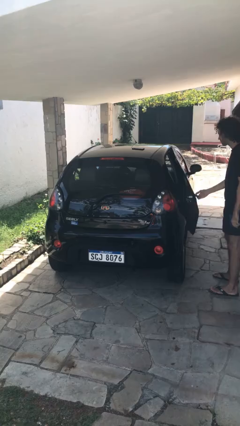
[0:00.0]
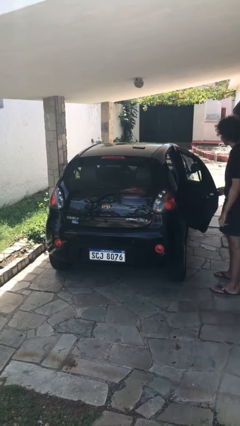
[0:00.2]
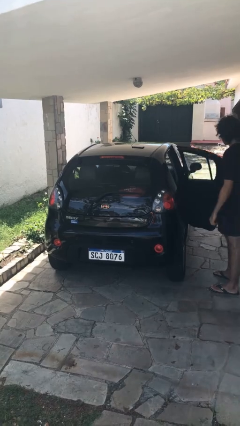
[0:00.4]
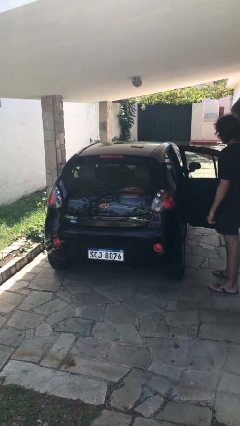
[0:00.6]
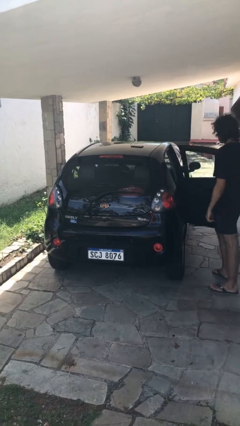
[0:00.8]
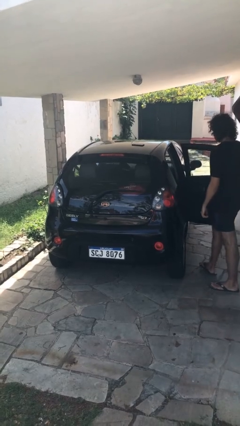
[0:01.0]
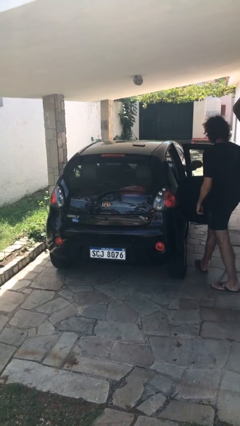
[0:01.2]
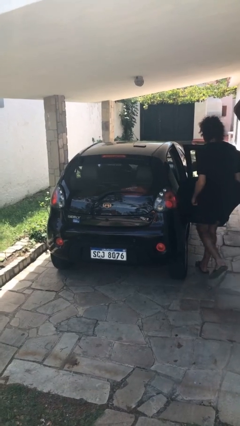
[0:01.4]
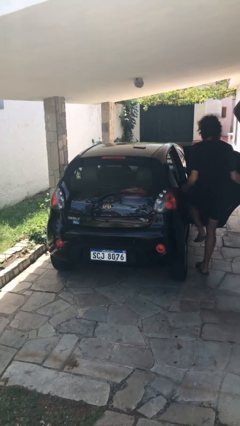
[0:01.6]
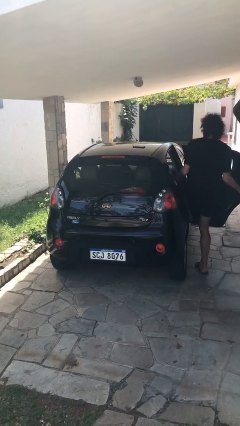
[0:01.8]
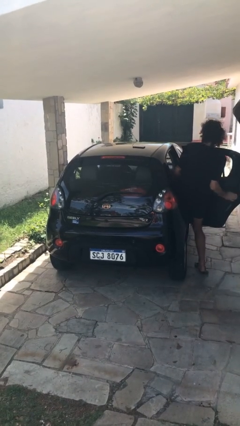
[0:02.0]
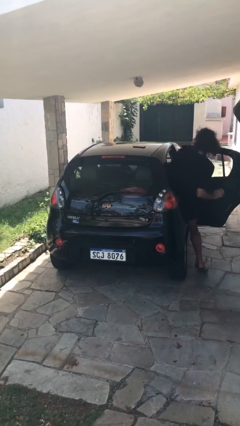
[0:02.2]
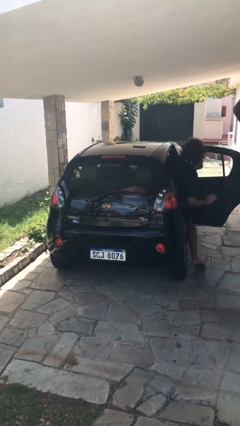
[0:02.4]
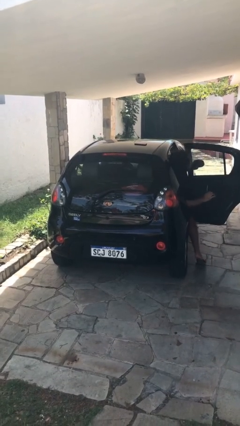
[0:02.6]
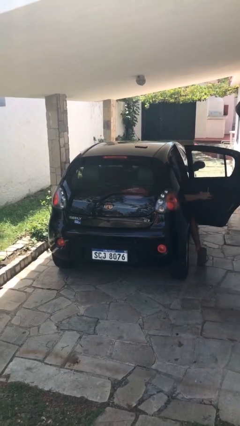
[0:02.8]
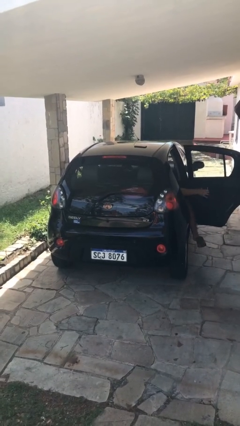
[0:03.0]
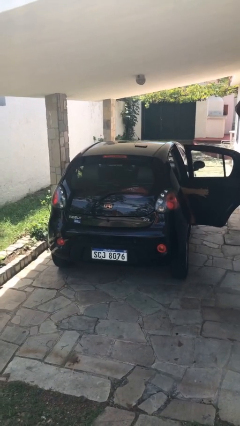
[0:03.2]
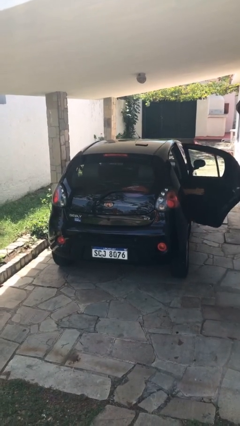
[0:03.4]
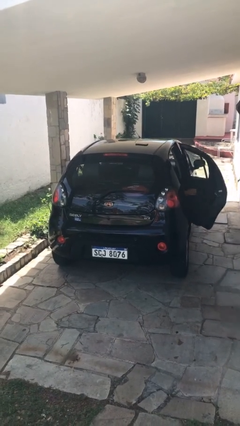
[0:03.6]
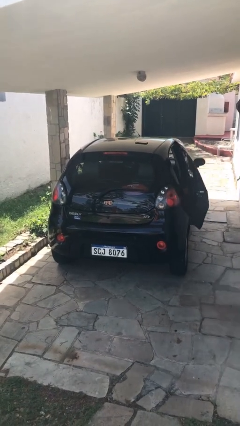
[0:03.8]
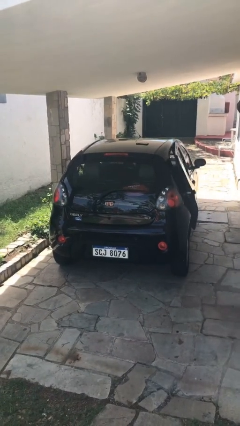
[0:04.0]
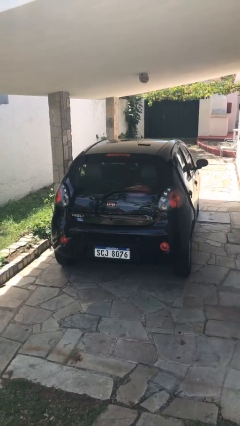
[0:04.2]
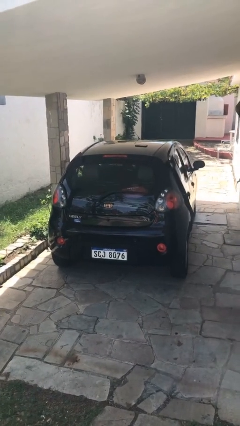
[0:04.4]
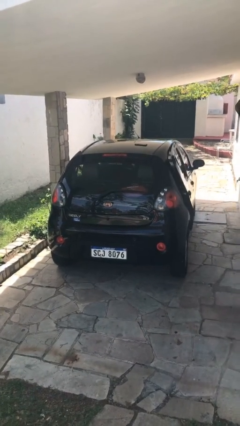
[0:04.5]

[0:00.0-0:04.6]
car picks up person

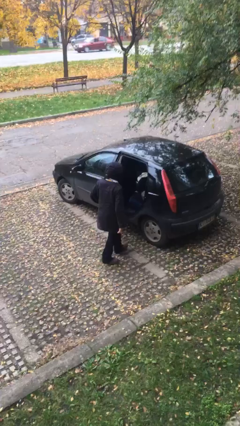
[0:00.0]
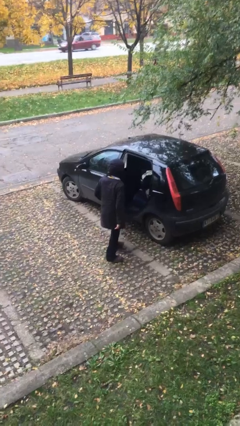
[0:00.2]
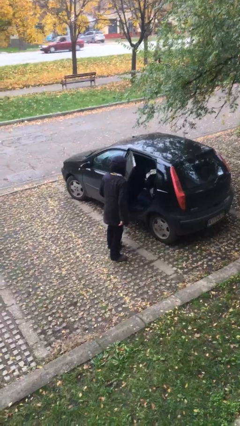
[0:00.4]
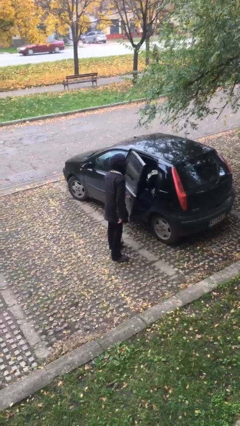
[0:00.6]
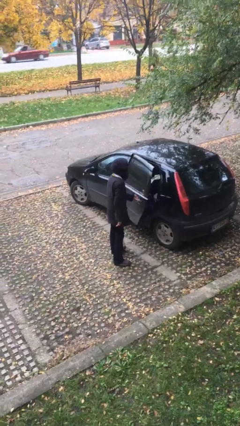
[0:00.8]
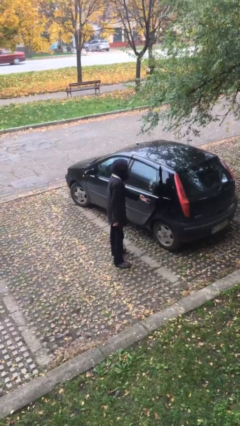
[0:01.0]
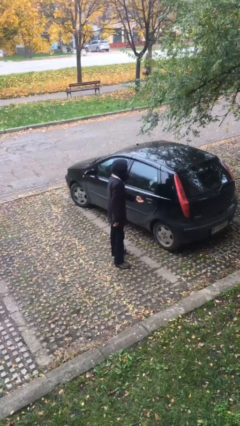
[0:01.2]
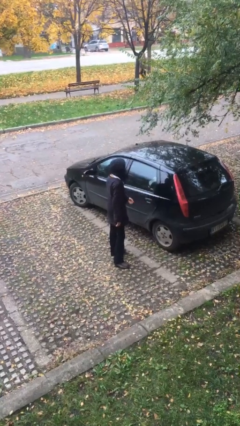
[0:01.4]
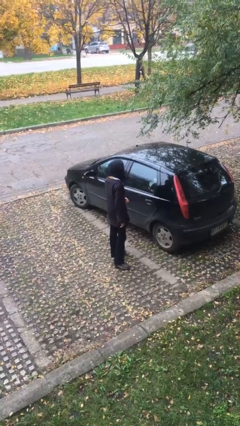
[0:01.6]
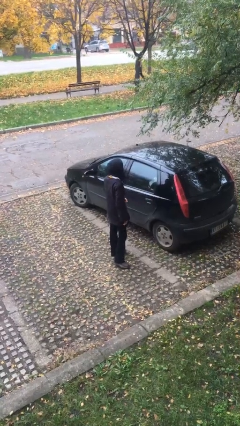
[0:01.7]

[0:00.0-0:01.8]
person closes car door

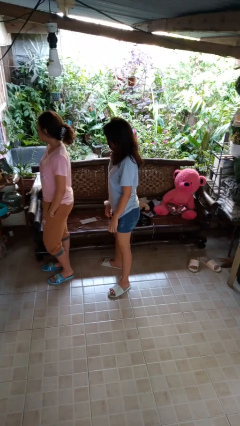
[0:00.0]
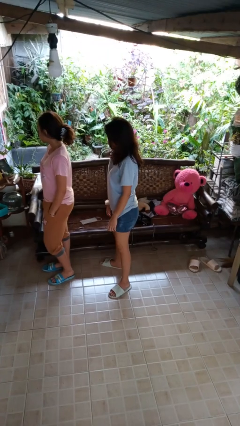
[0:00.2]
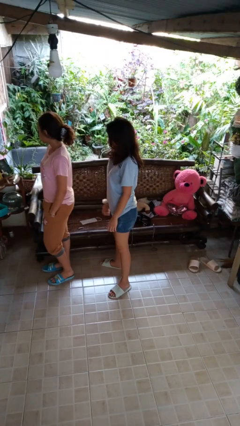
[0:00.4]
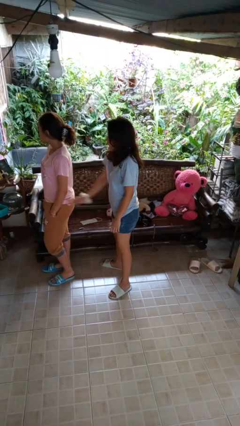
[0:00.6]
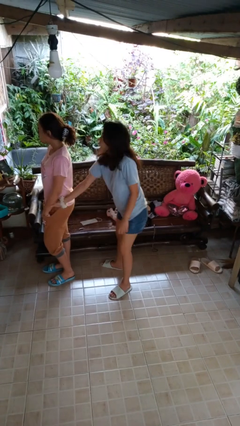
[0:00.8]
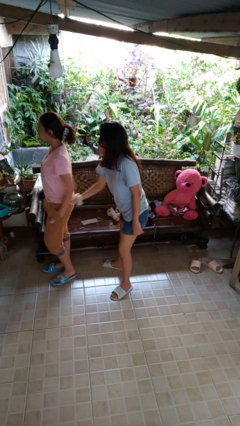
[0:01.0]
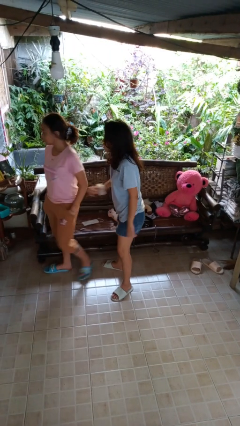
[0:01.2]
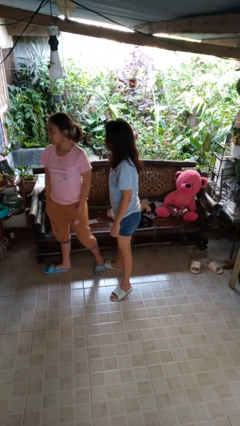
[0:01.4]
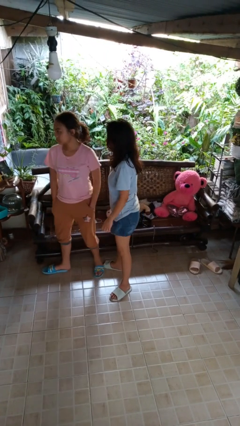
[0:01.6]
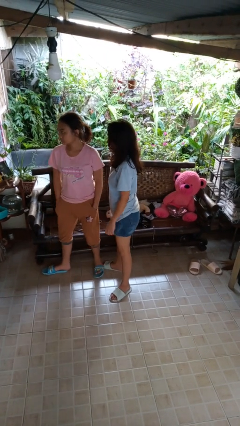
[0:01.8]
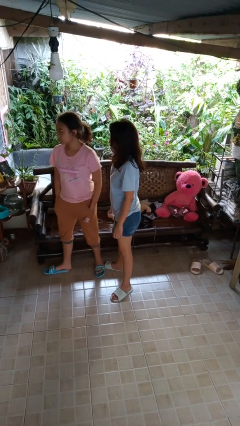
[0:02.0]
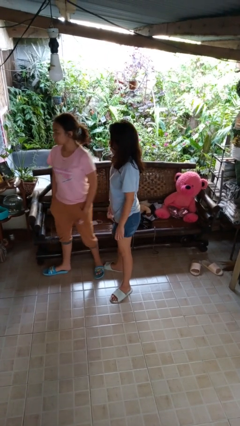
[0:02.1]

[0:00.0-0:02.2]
person grabs person by forearm

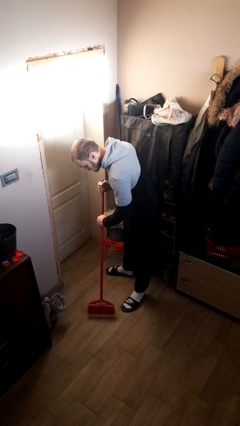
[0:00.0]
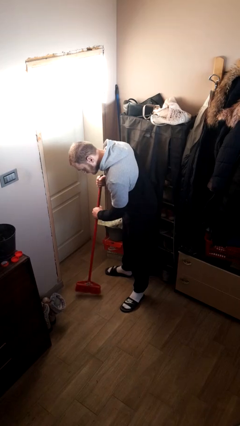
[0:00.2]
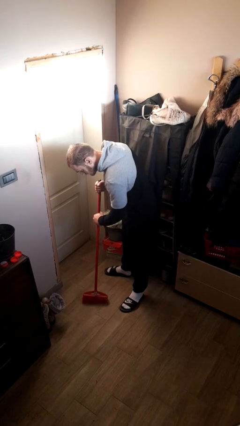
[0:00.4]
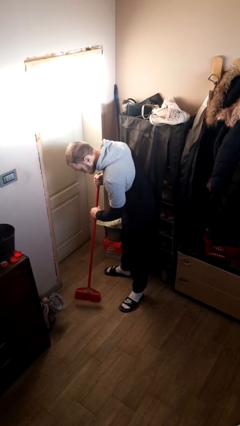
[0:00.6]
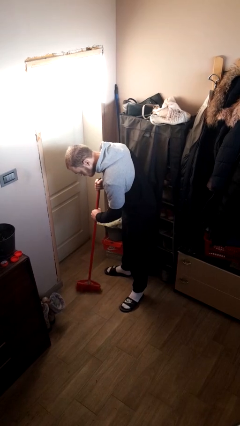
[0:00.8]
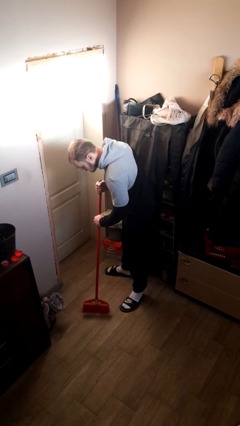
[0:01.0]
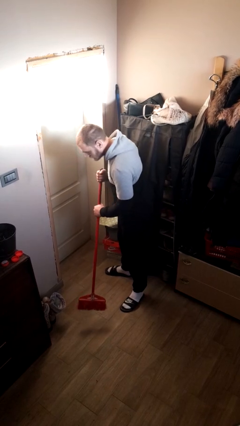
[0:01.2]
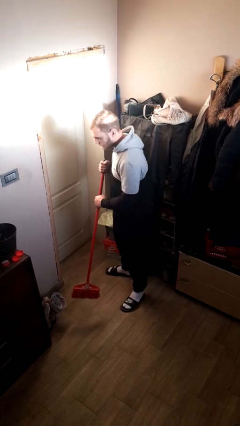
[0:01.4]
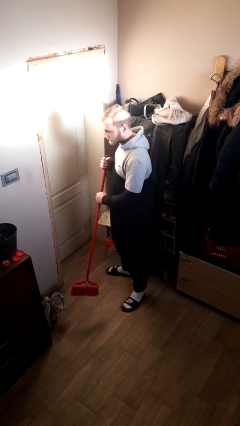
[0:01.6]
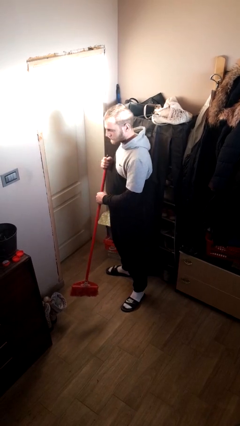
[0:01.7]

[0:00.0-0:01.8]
person sweeps floor

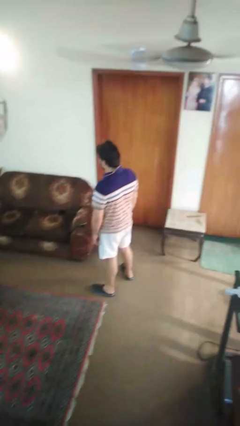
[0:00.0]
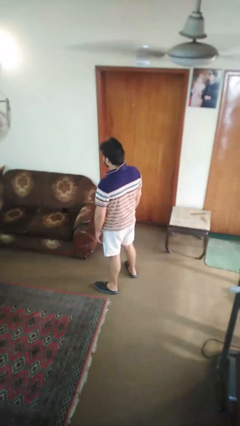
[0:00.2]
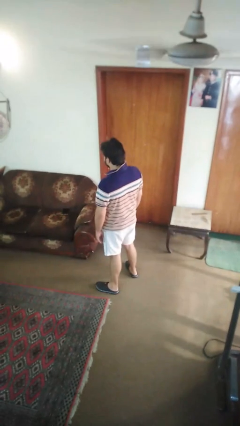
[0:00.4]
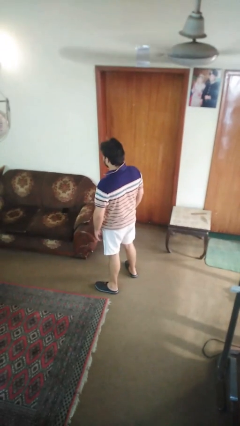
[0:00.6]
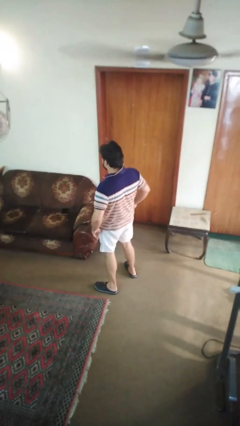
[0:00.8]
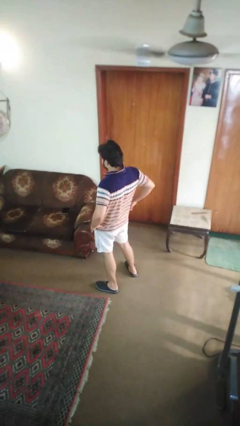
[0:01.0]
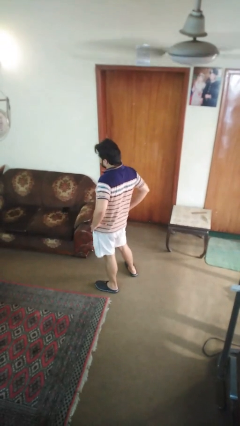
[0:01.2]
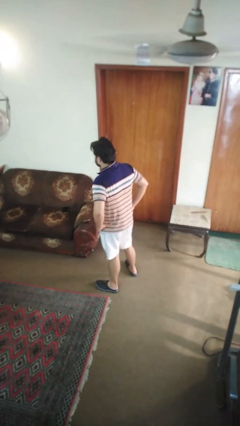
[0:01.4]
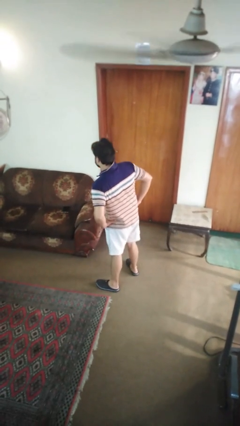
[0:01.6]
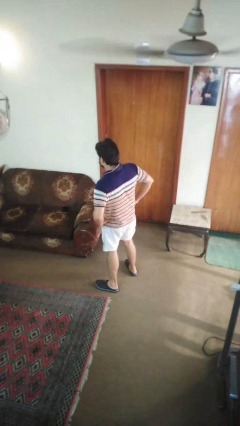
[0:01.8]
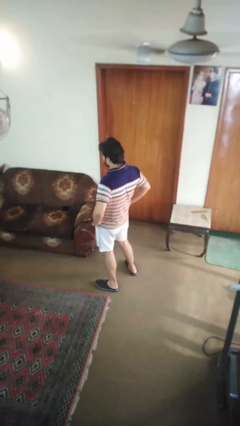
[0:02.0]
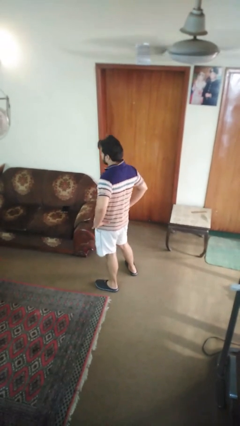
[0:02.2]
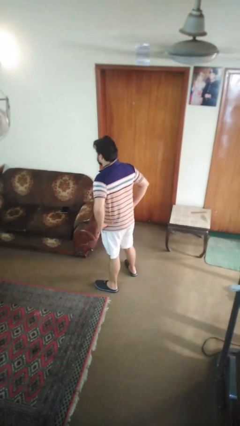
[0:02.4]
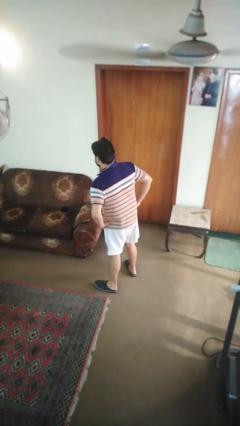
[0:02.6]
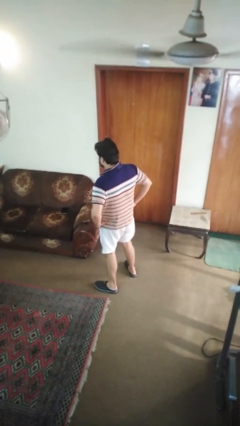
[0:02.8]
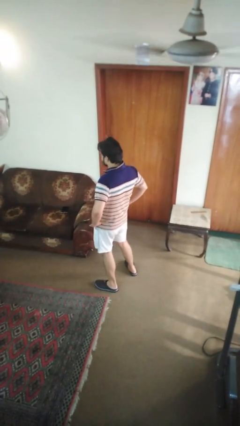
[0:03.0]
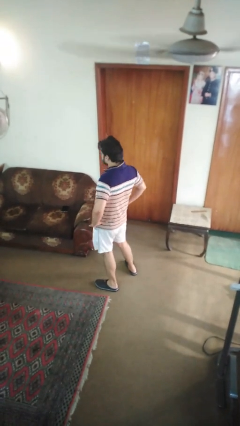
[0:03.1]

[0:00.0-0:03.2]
person wiggles hips

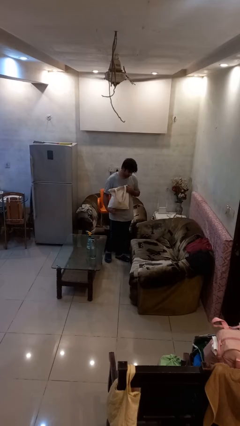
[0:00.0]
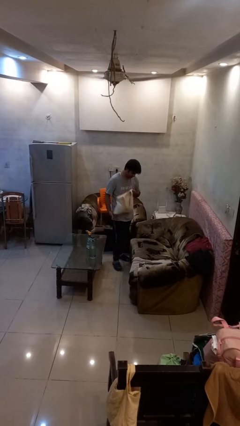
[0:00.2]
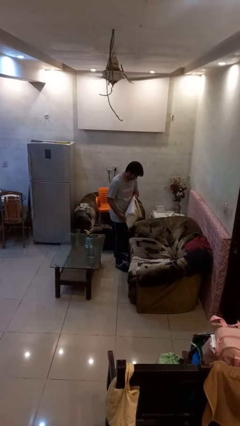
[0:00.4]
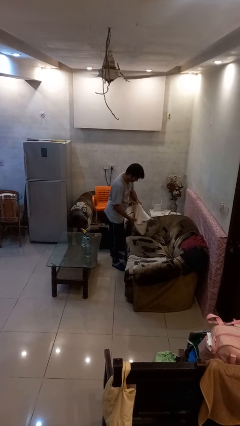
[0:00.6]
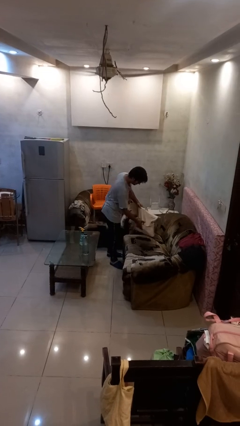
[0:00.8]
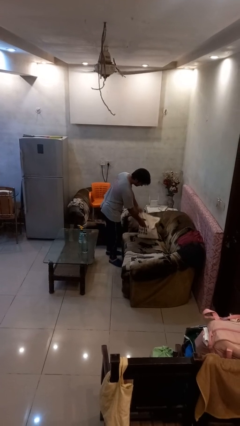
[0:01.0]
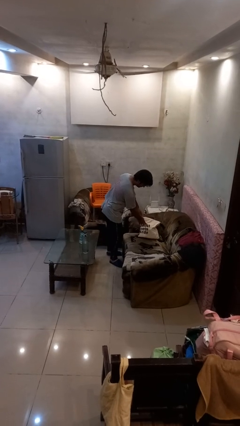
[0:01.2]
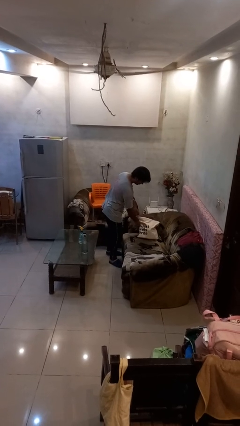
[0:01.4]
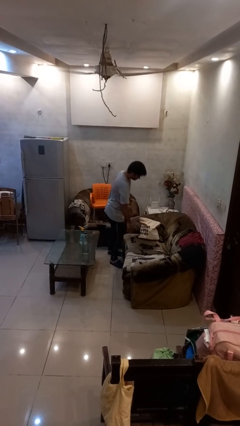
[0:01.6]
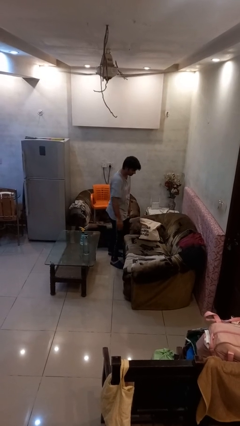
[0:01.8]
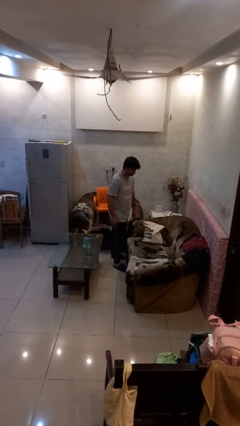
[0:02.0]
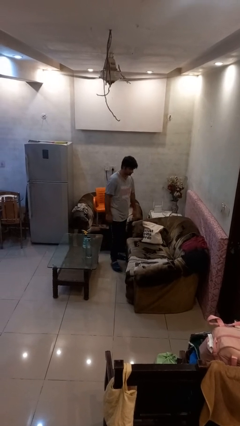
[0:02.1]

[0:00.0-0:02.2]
person puts down object on couch

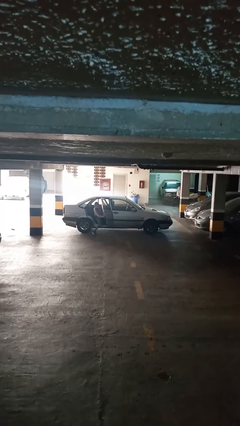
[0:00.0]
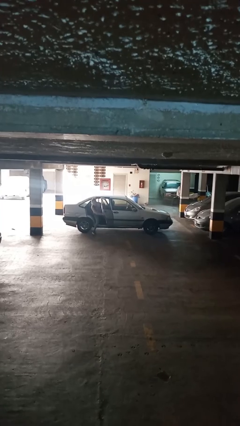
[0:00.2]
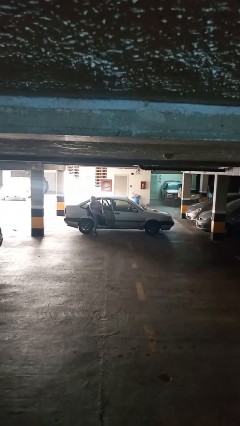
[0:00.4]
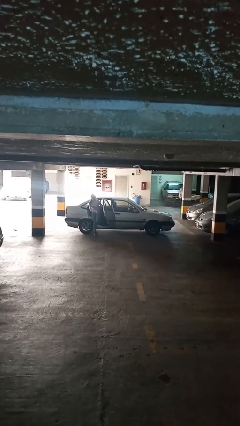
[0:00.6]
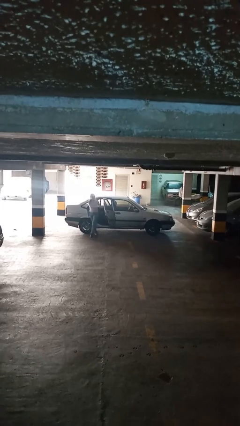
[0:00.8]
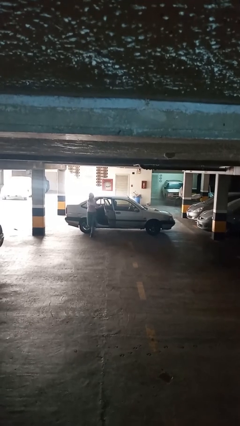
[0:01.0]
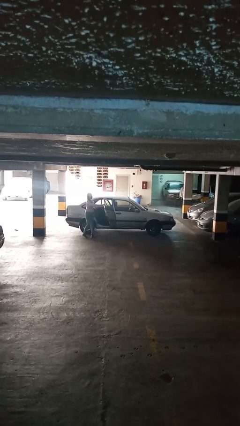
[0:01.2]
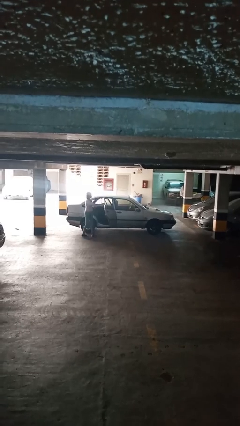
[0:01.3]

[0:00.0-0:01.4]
car drops off person
